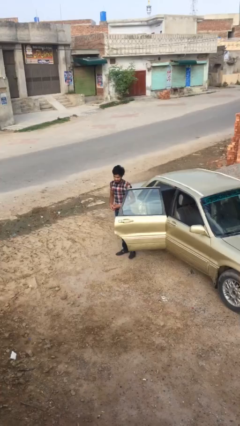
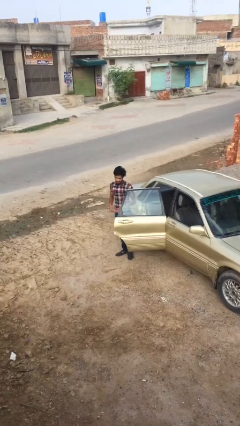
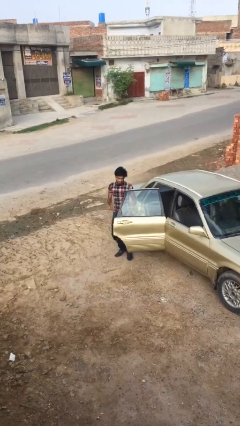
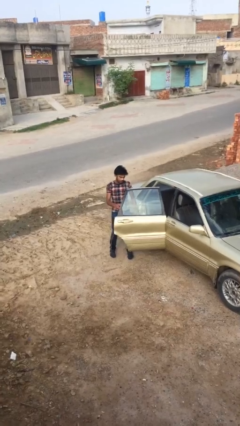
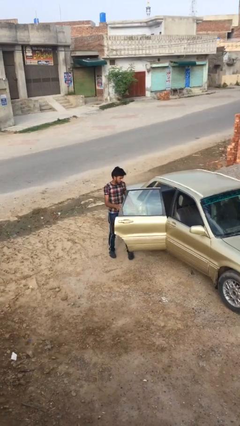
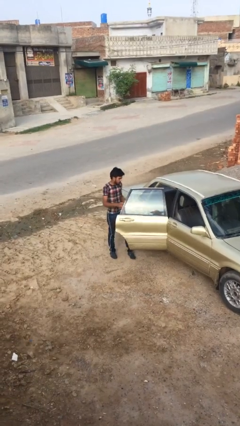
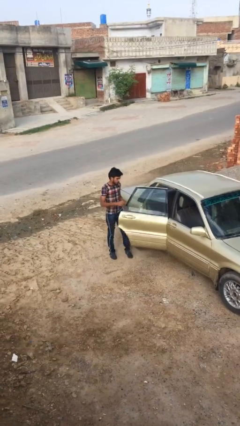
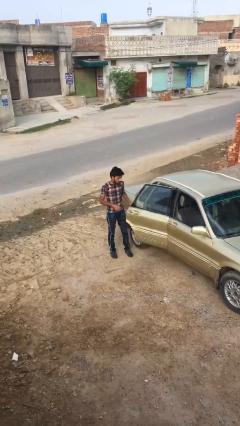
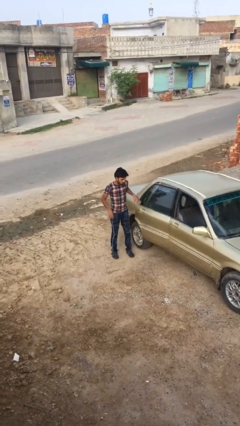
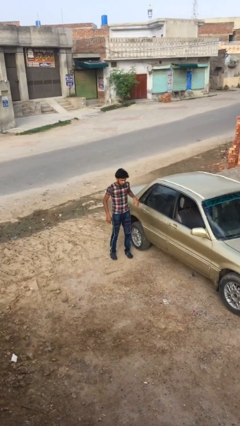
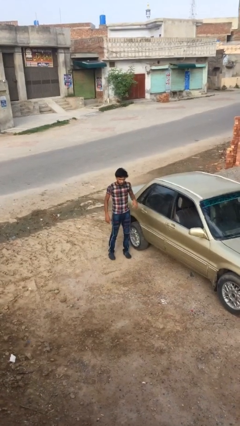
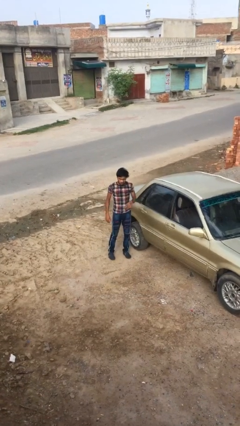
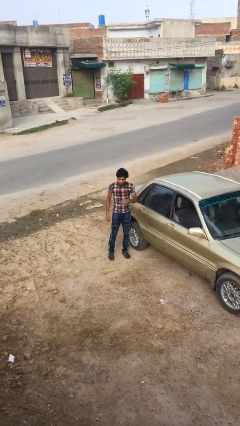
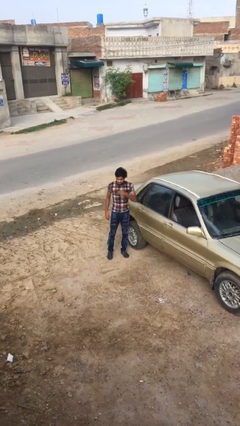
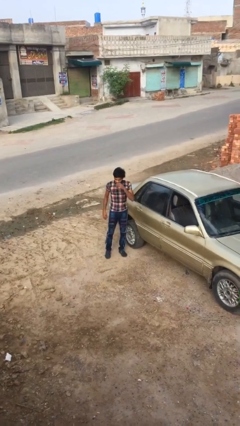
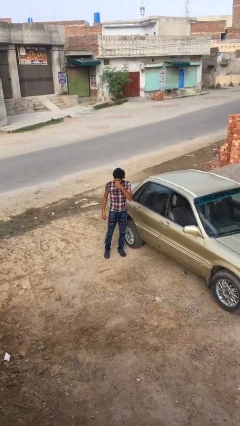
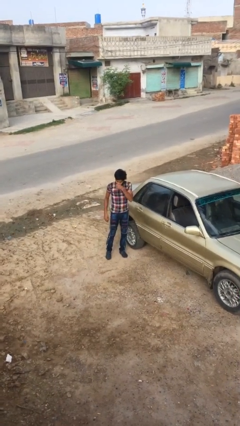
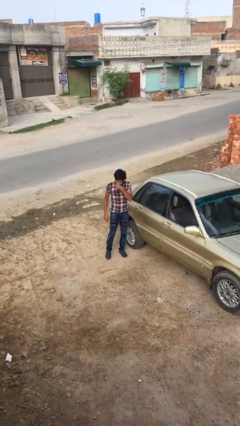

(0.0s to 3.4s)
person closes car door

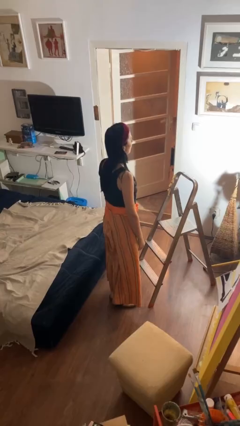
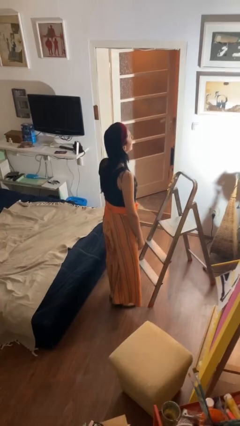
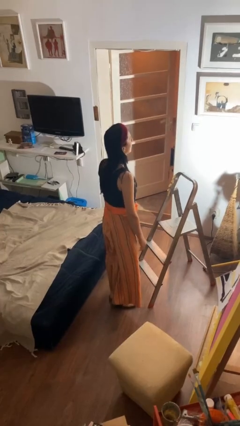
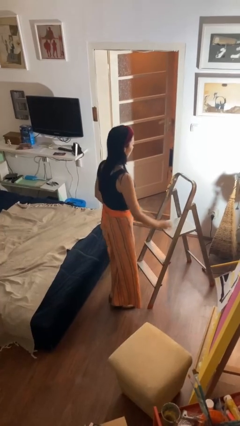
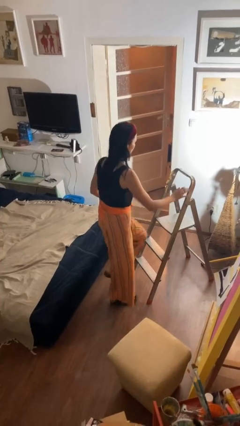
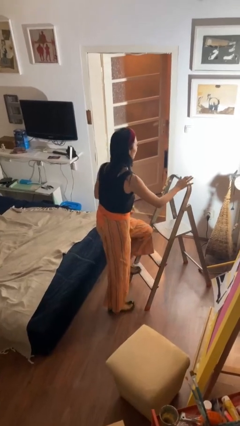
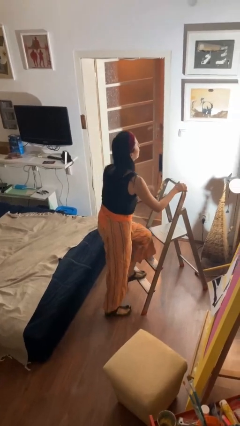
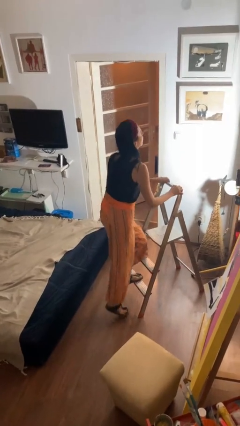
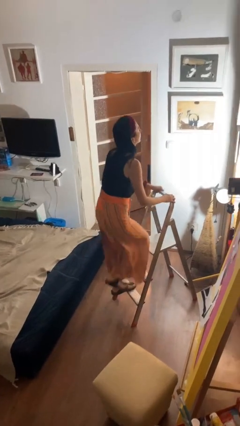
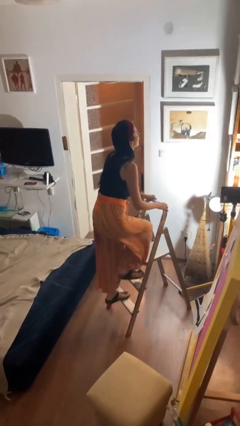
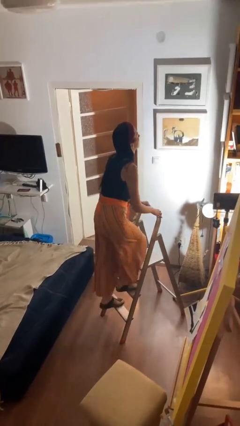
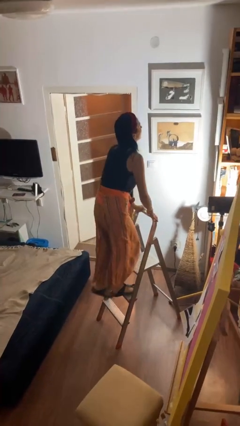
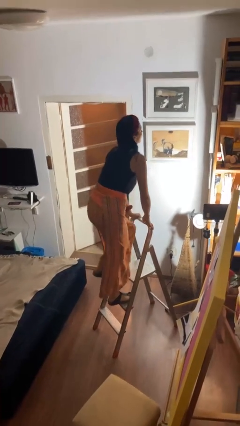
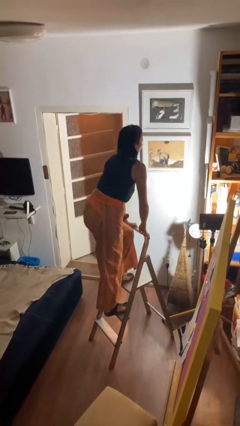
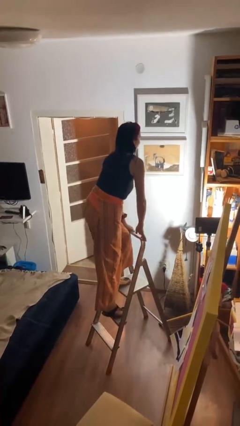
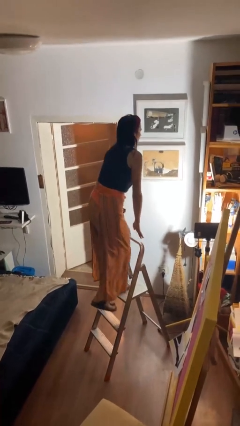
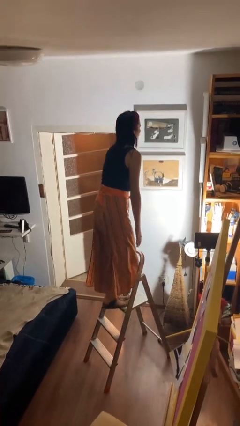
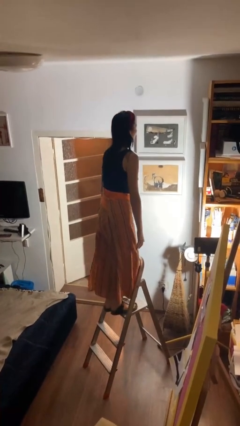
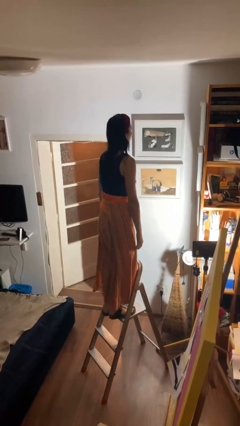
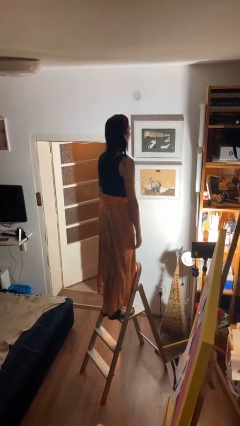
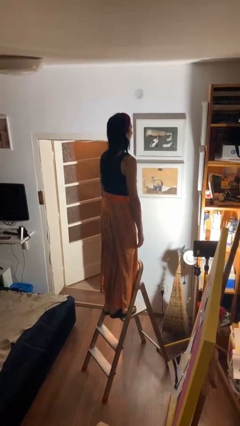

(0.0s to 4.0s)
person climbs up ladder

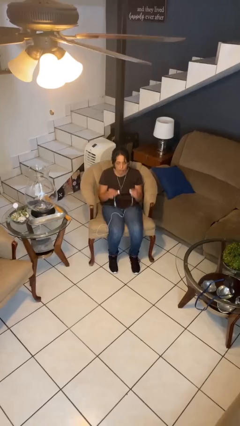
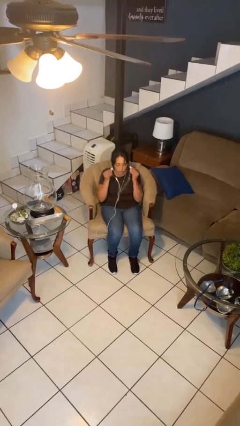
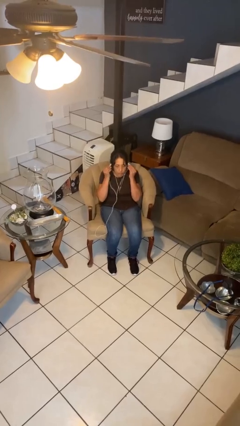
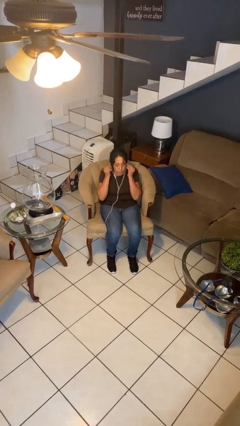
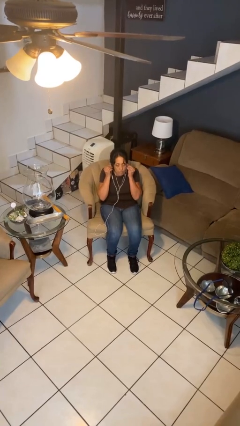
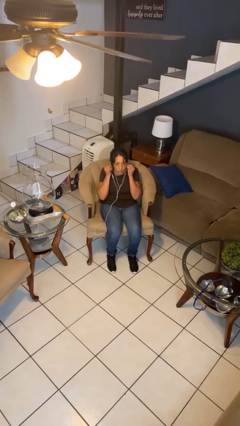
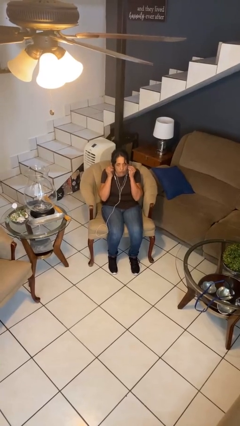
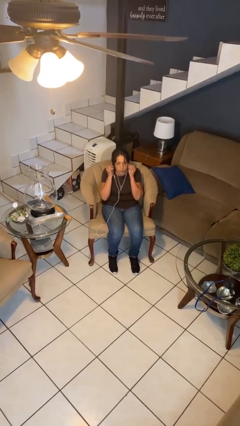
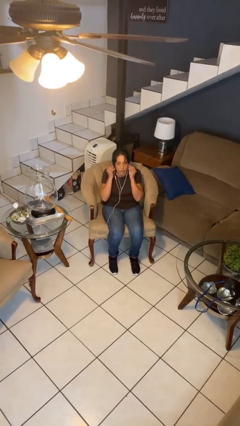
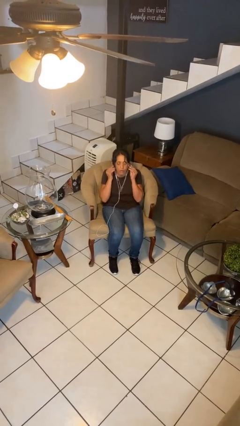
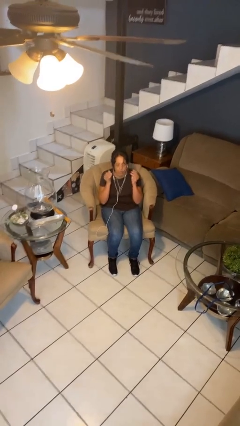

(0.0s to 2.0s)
person puts on headphones

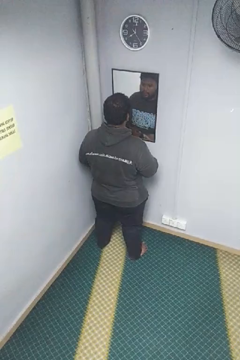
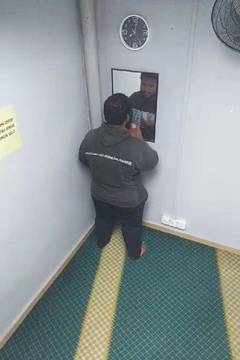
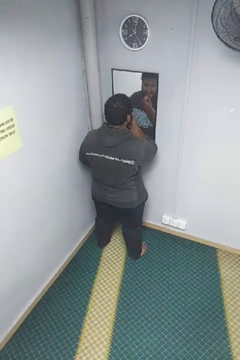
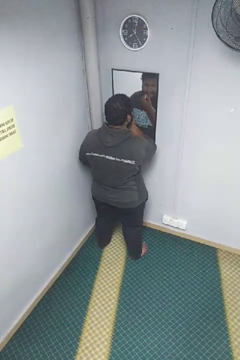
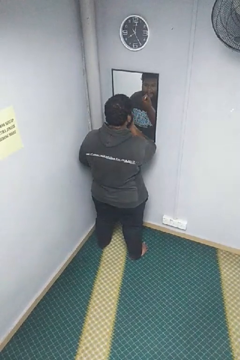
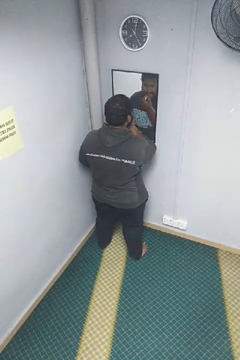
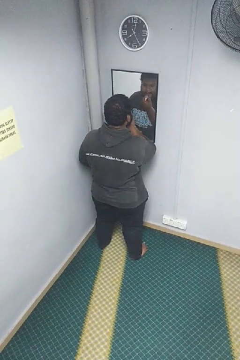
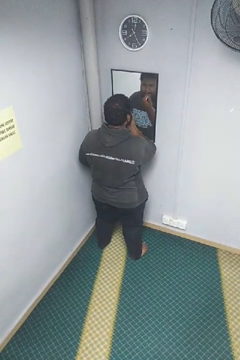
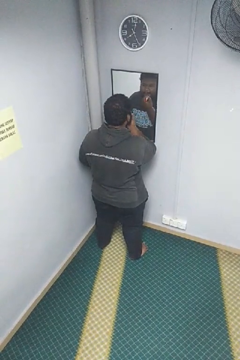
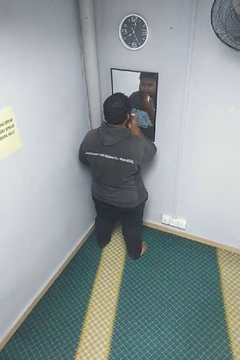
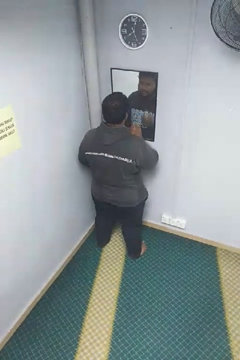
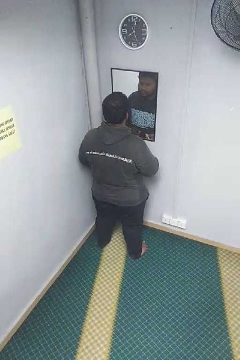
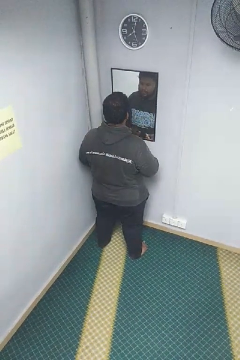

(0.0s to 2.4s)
person applies lip makeup

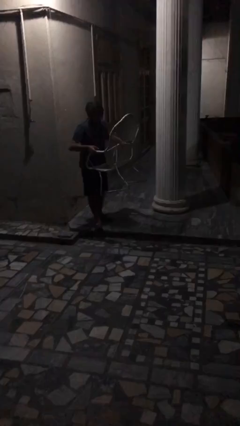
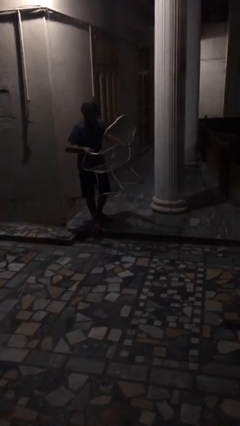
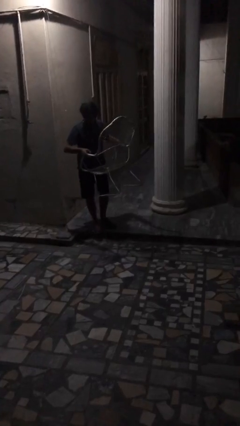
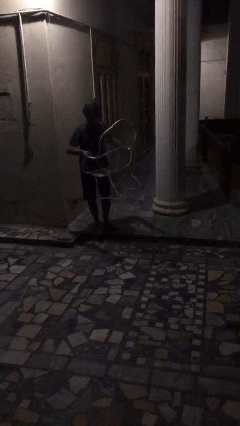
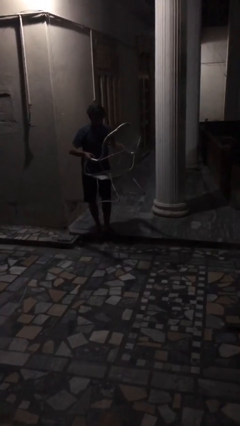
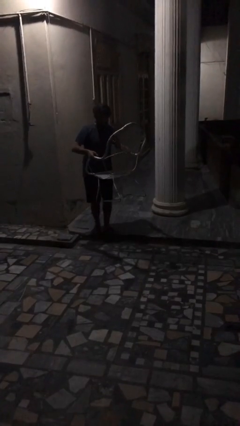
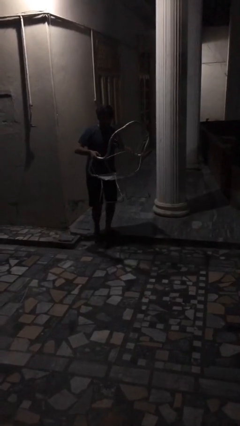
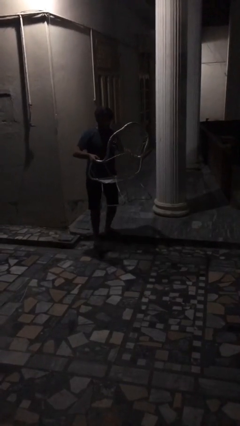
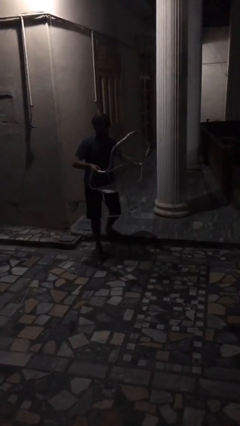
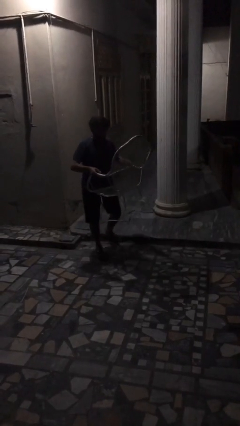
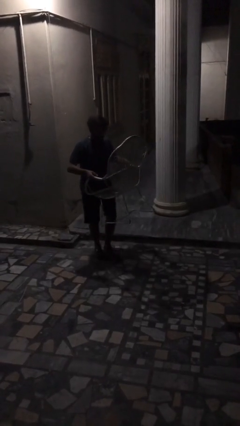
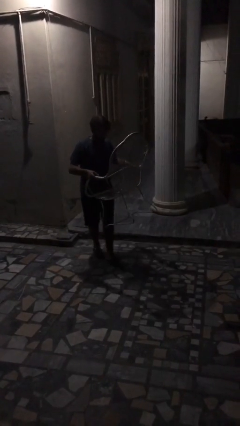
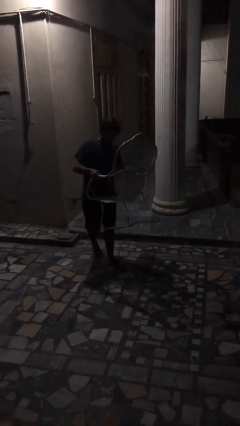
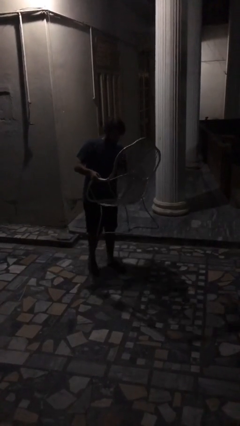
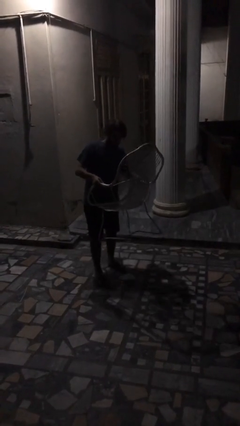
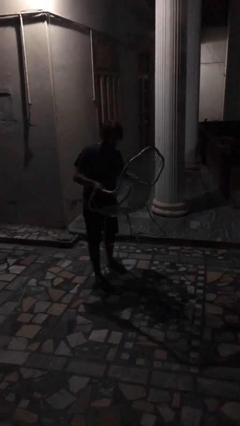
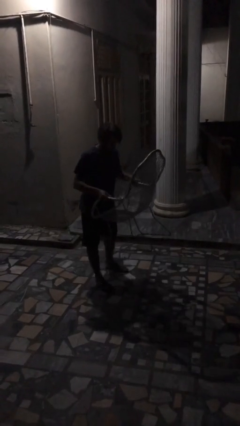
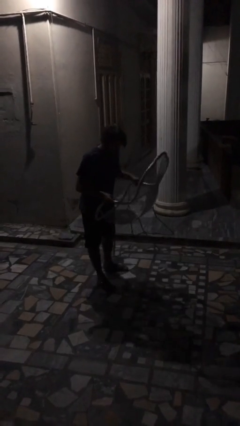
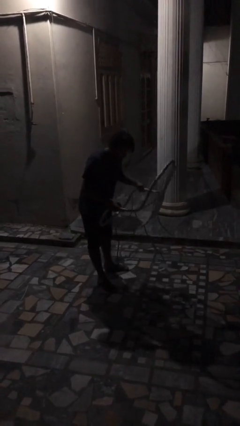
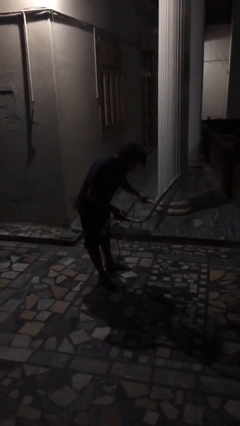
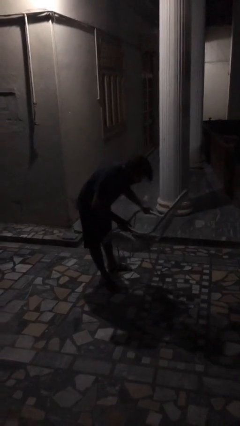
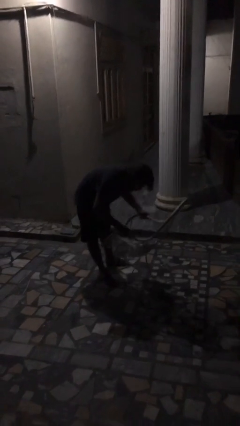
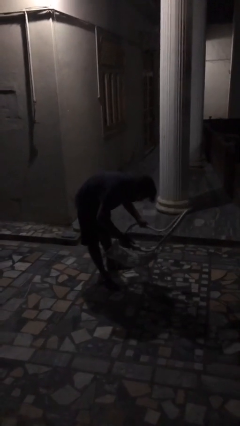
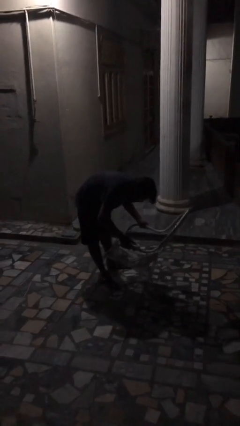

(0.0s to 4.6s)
person carries heavy object

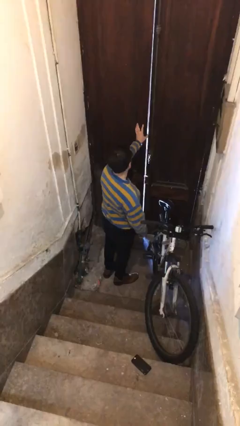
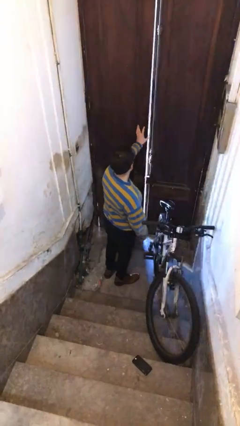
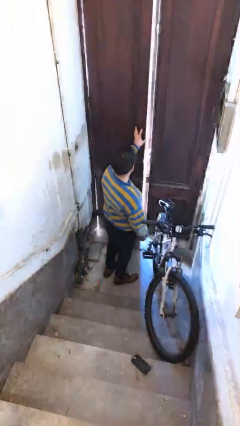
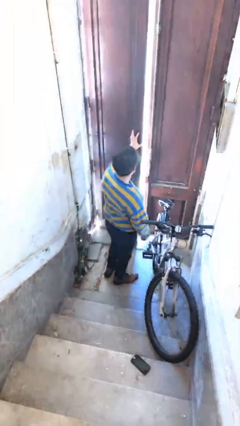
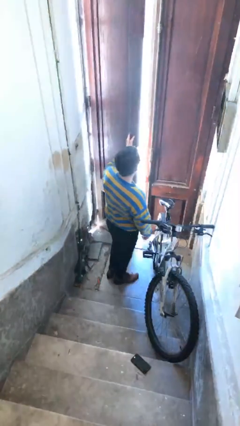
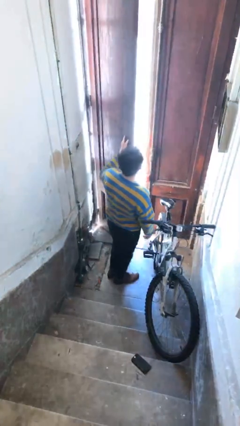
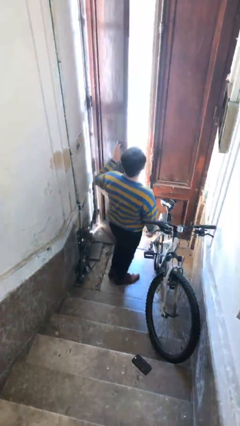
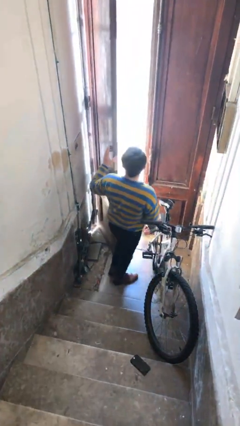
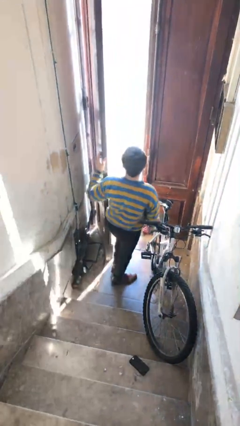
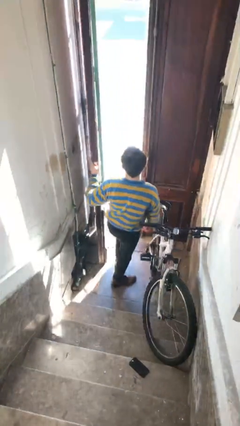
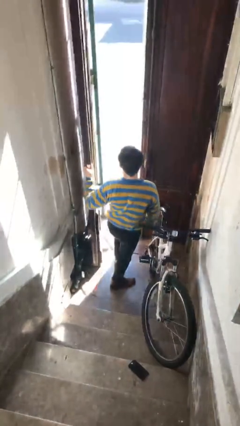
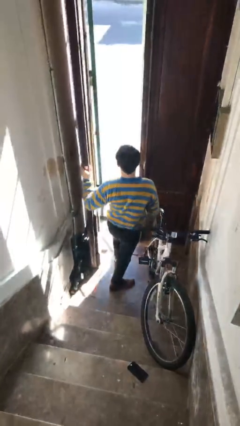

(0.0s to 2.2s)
person opens facility door
